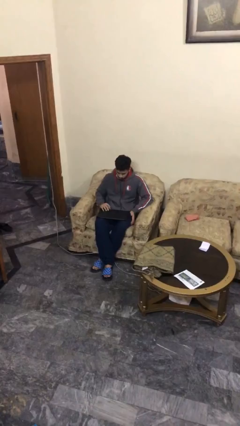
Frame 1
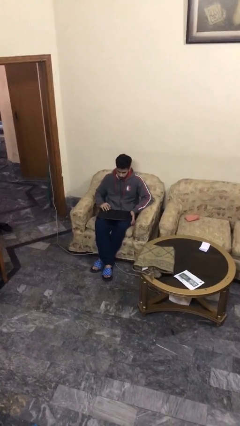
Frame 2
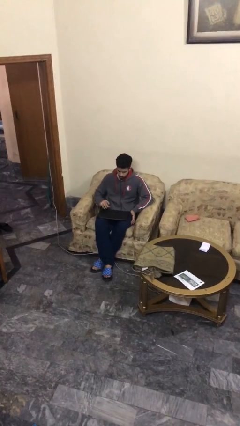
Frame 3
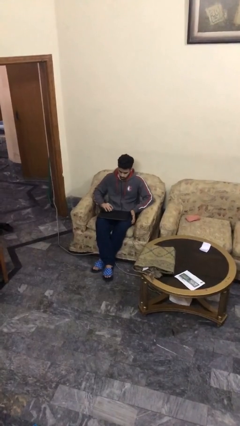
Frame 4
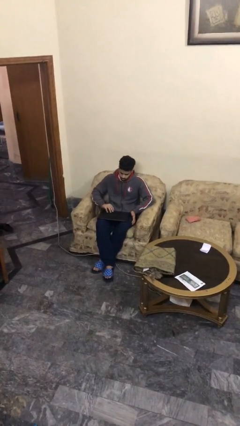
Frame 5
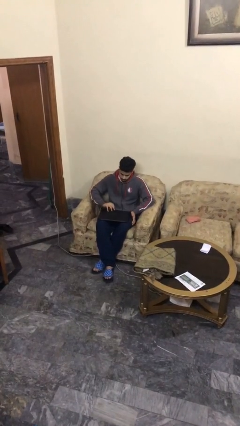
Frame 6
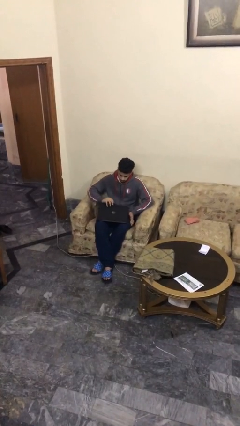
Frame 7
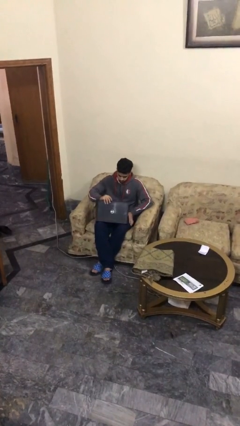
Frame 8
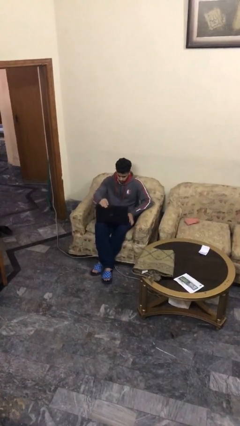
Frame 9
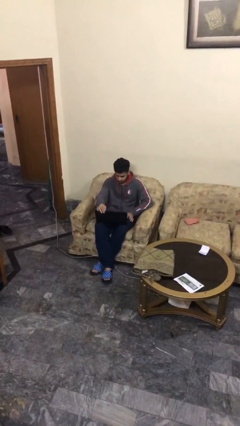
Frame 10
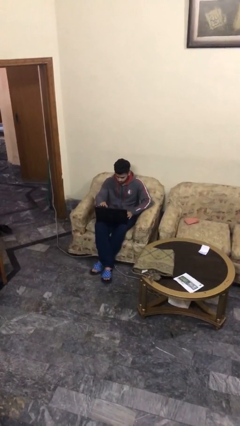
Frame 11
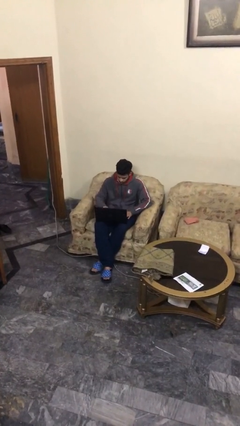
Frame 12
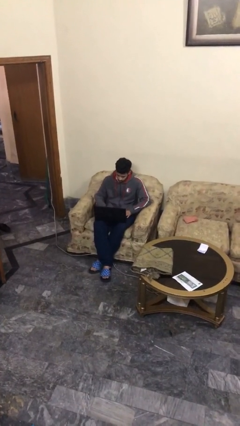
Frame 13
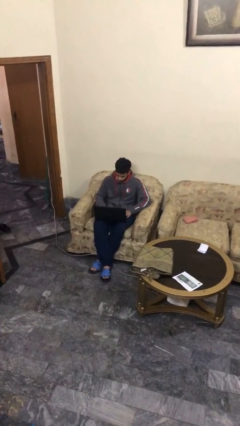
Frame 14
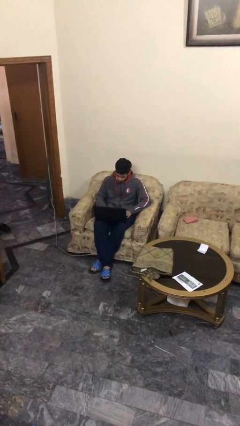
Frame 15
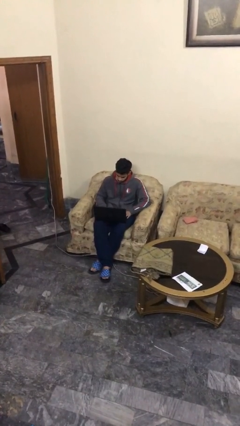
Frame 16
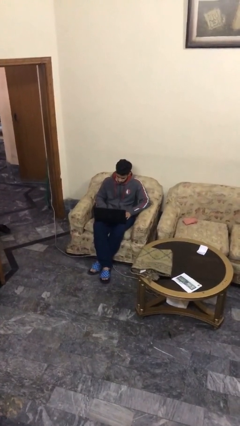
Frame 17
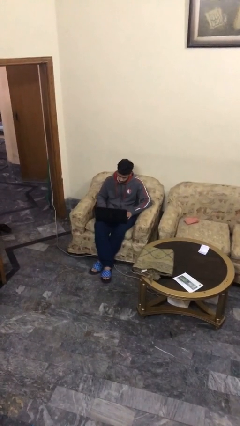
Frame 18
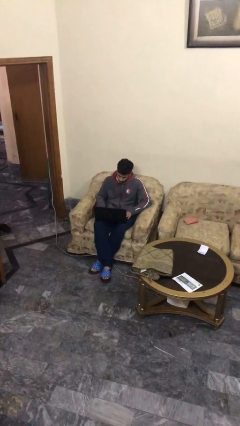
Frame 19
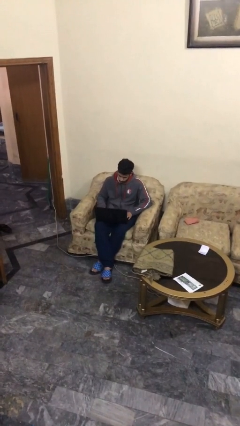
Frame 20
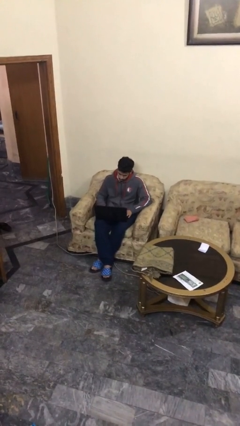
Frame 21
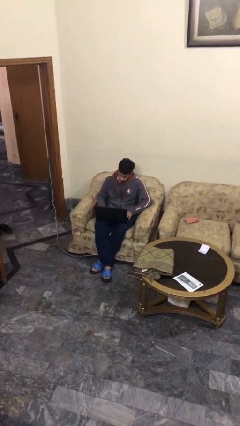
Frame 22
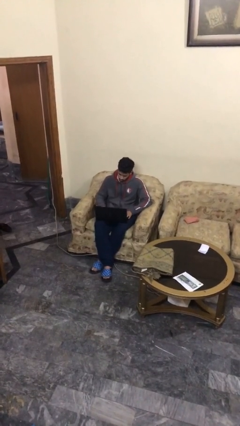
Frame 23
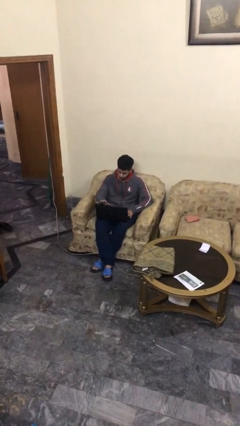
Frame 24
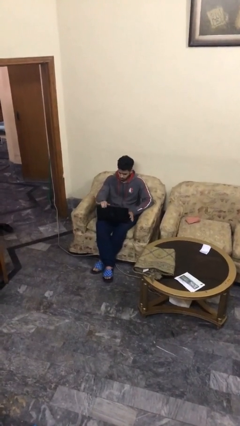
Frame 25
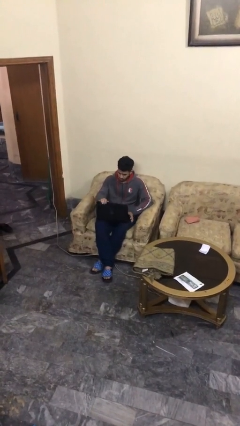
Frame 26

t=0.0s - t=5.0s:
person interacts with laptop

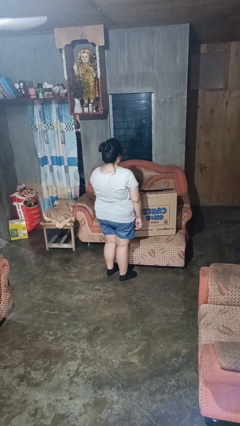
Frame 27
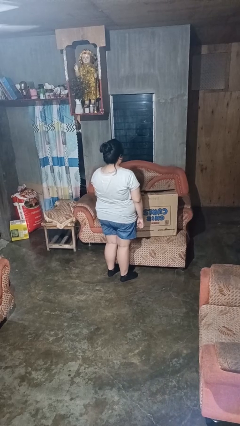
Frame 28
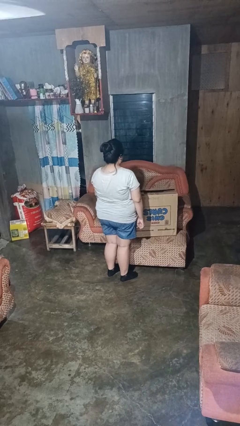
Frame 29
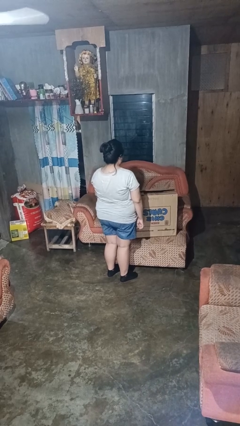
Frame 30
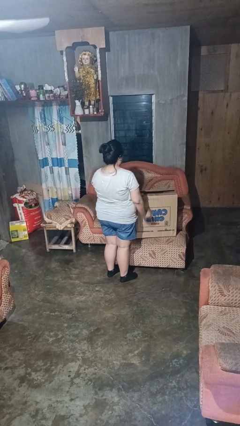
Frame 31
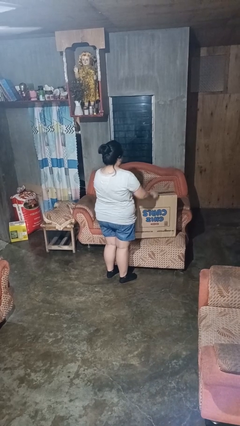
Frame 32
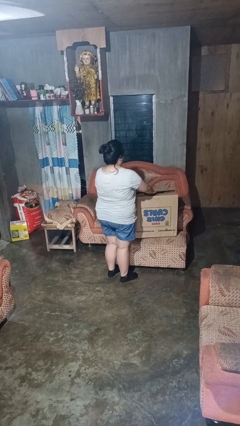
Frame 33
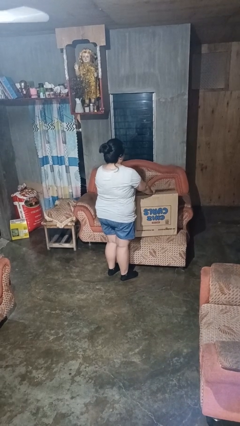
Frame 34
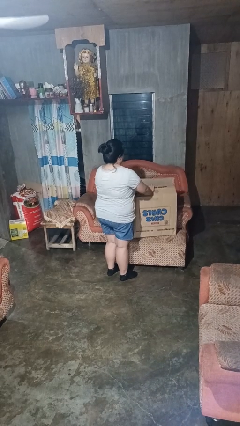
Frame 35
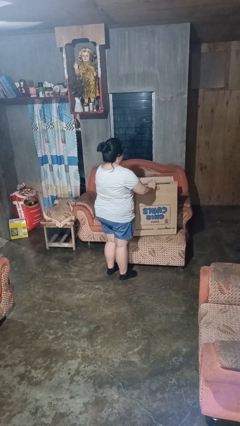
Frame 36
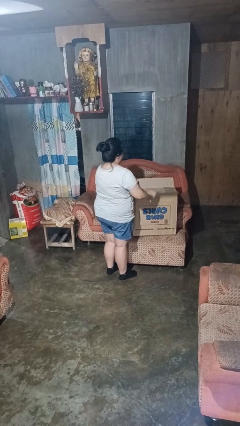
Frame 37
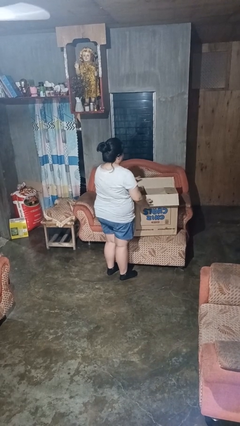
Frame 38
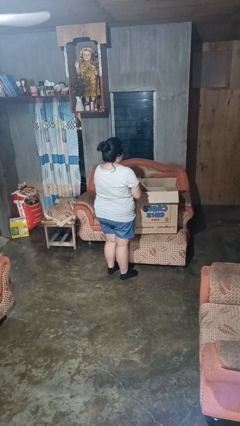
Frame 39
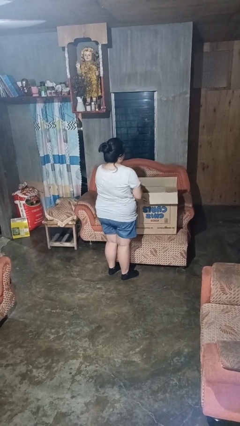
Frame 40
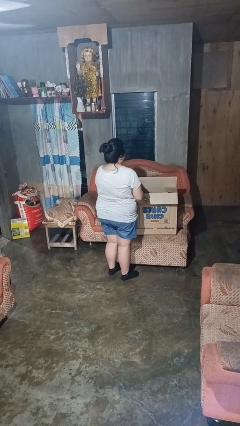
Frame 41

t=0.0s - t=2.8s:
person opens box

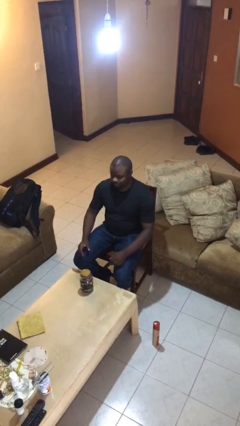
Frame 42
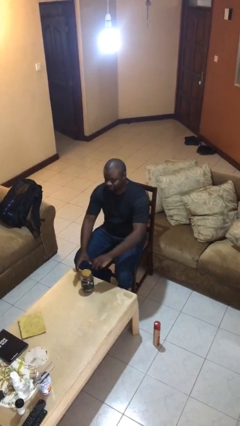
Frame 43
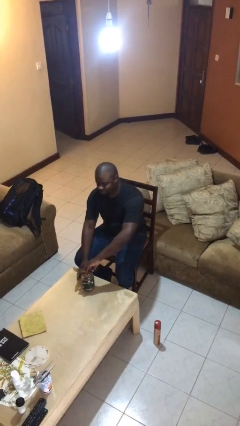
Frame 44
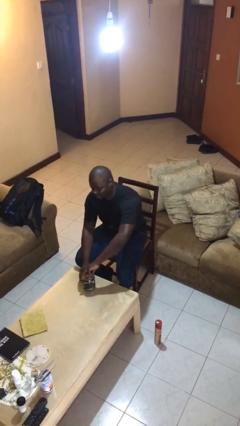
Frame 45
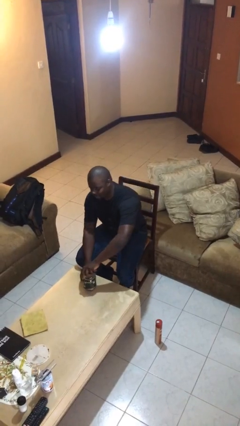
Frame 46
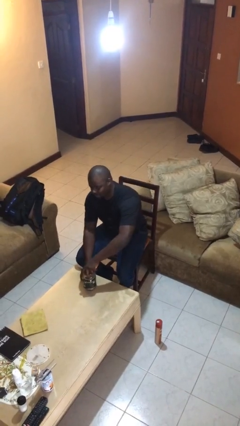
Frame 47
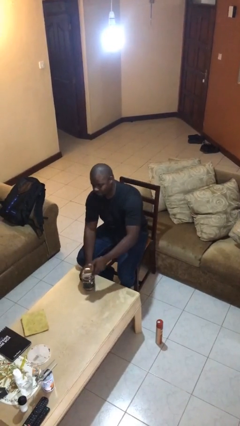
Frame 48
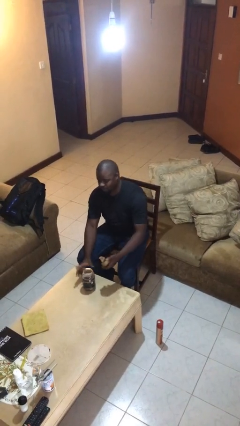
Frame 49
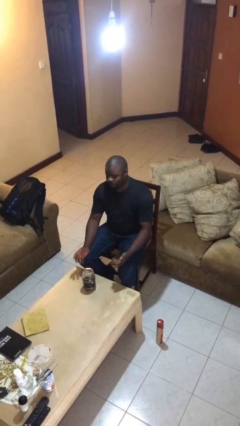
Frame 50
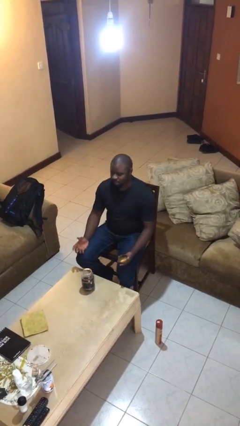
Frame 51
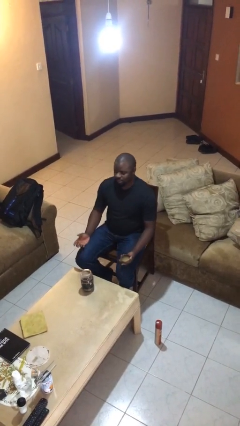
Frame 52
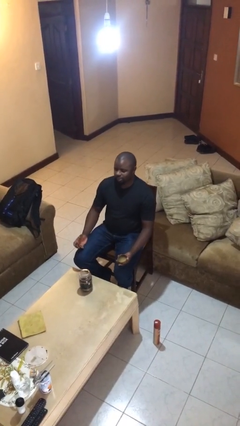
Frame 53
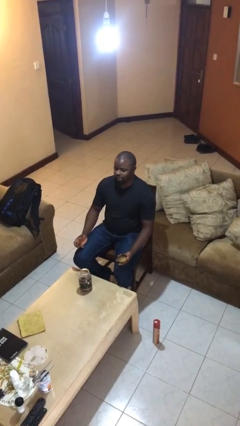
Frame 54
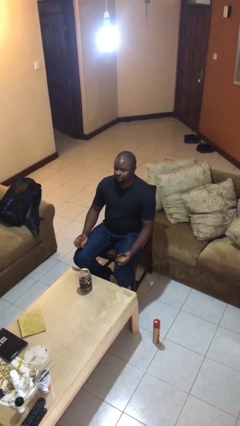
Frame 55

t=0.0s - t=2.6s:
person opens jar

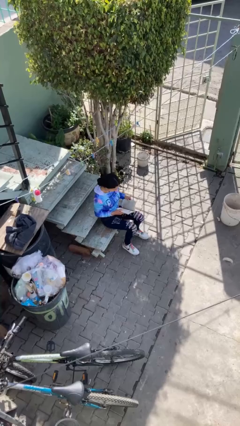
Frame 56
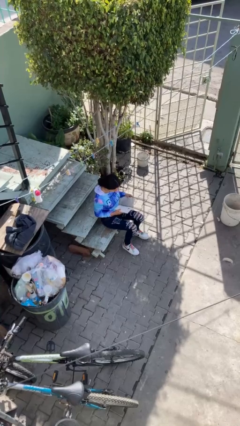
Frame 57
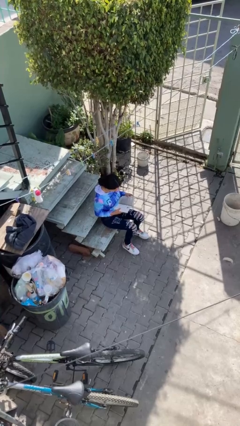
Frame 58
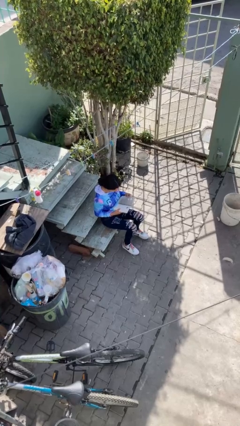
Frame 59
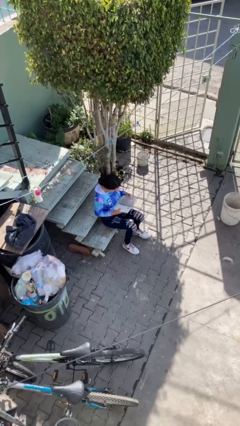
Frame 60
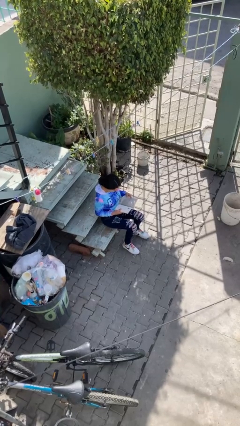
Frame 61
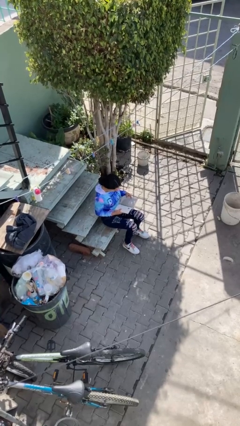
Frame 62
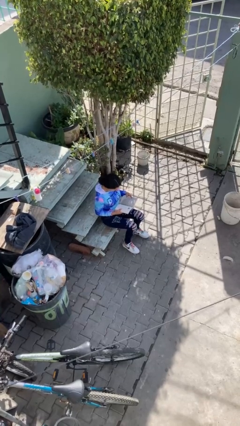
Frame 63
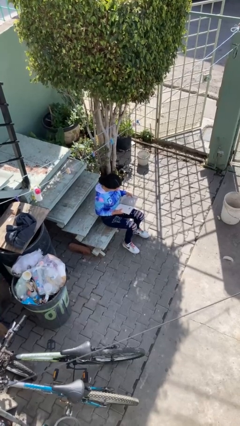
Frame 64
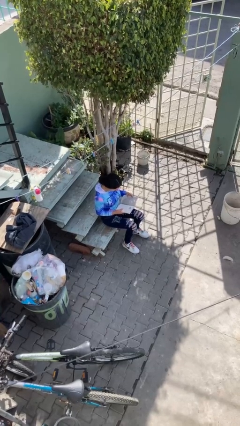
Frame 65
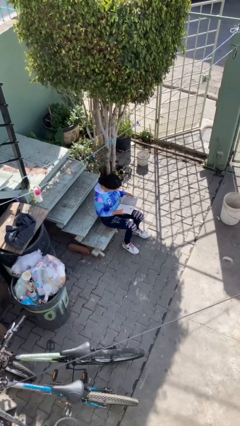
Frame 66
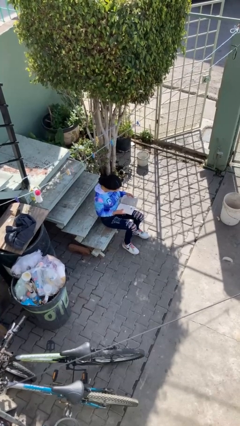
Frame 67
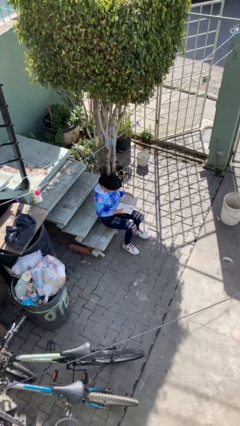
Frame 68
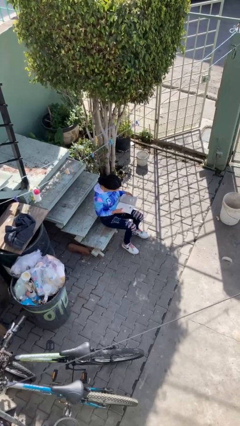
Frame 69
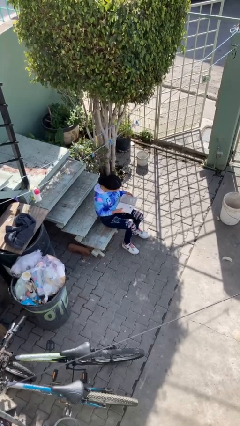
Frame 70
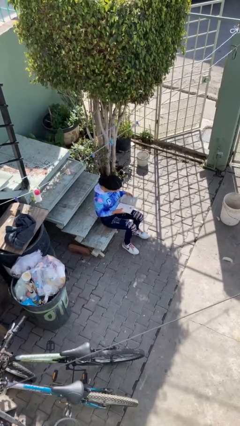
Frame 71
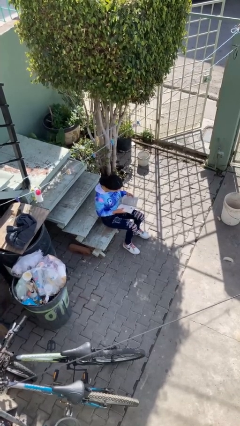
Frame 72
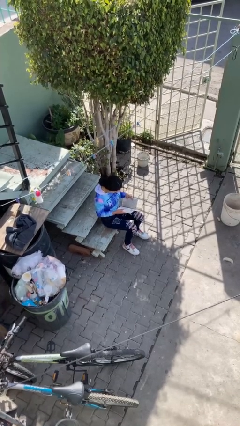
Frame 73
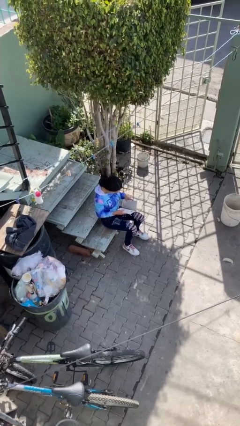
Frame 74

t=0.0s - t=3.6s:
person reads document

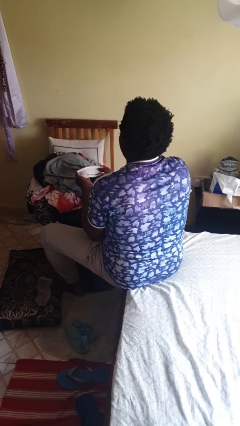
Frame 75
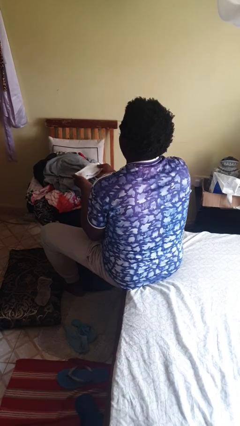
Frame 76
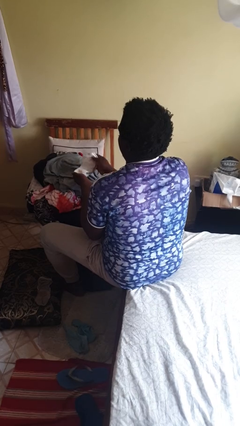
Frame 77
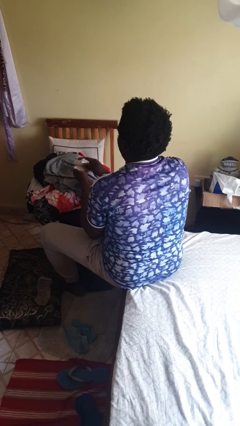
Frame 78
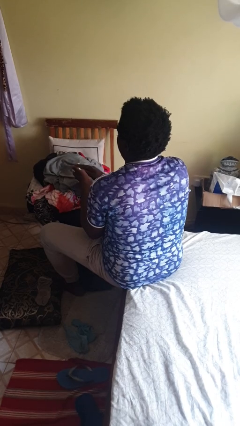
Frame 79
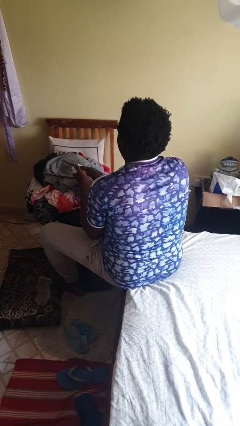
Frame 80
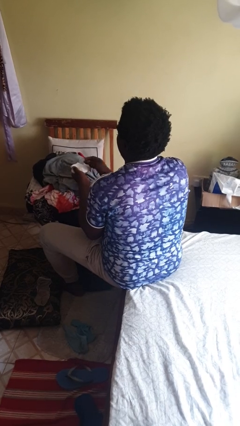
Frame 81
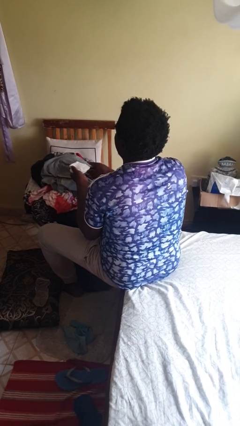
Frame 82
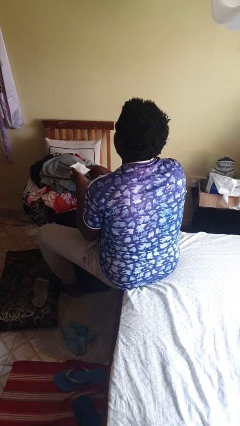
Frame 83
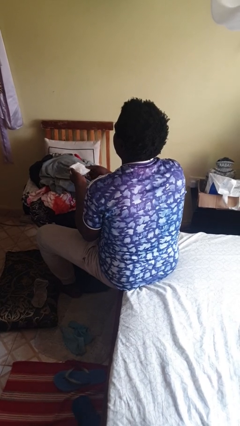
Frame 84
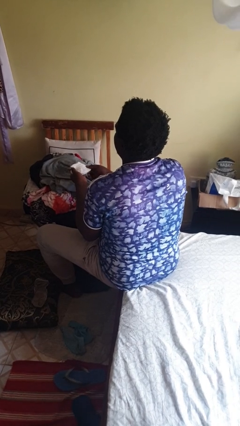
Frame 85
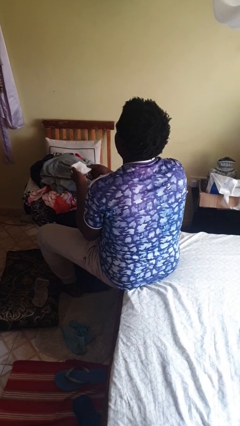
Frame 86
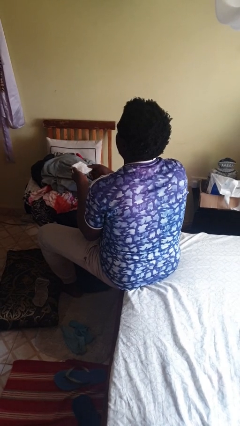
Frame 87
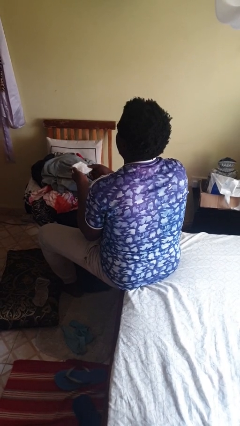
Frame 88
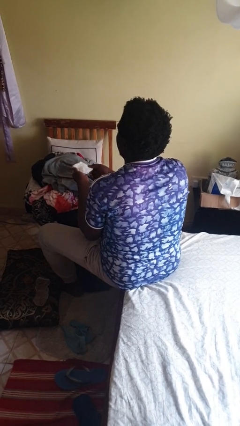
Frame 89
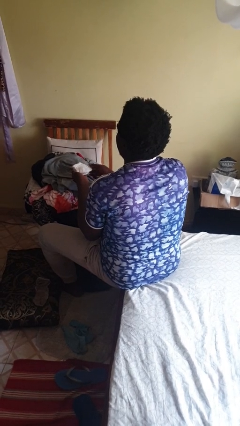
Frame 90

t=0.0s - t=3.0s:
person folds socks

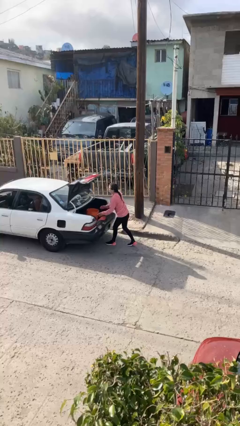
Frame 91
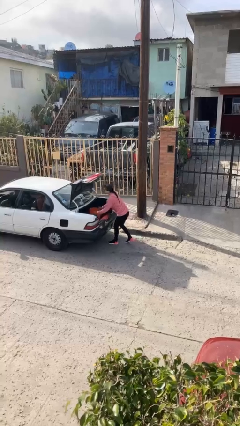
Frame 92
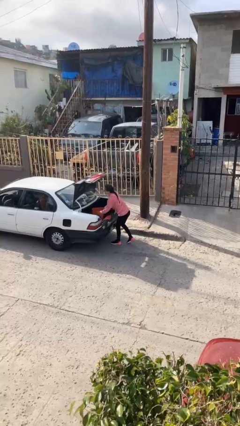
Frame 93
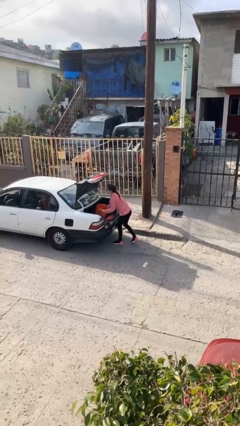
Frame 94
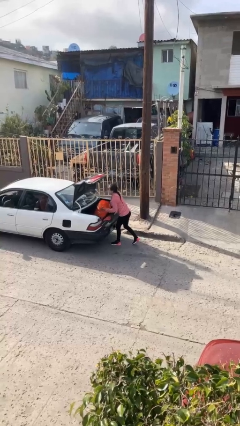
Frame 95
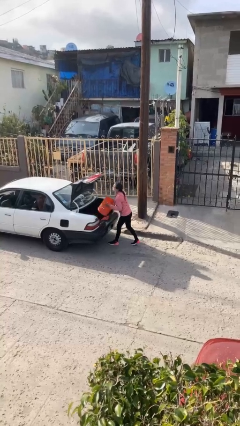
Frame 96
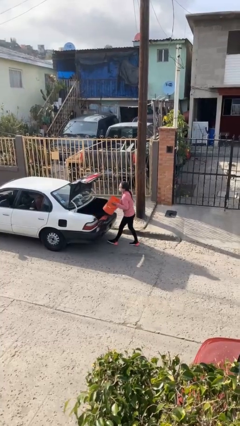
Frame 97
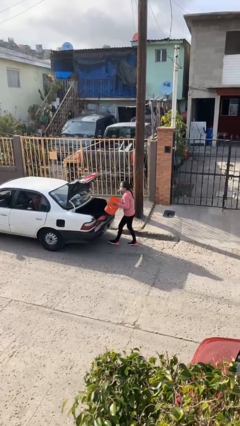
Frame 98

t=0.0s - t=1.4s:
person unloads car
